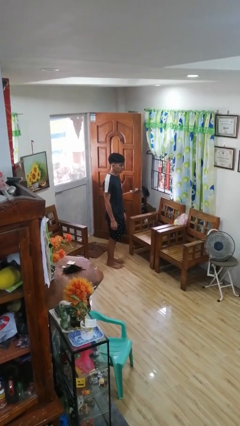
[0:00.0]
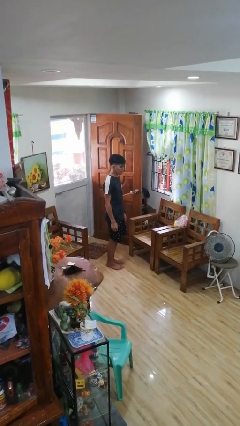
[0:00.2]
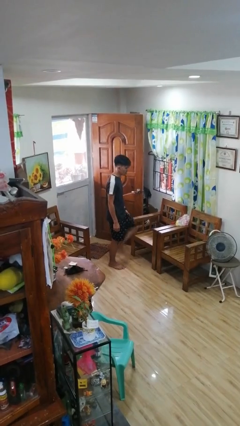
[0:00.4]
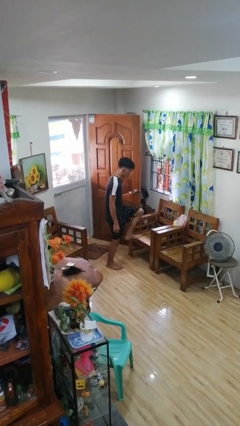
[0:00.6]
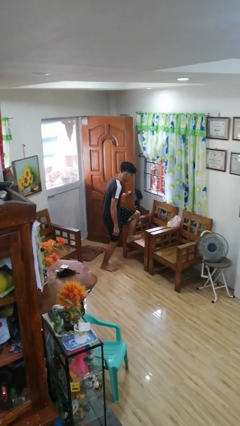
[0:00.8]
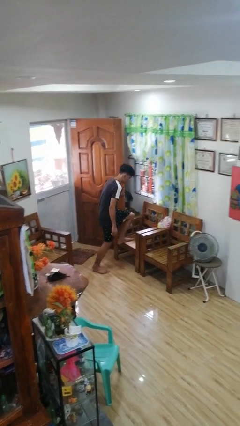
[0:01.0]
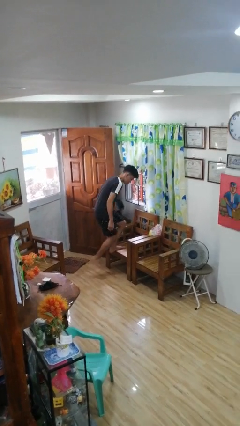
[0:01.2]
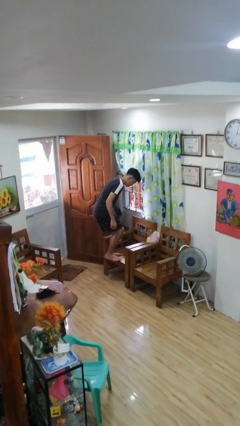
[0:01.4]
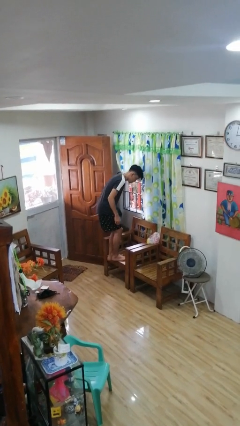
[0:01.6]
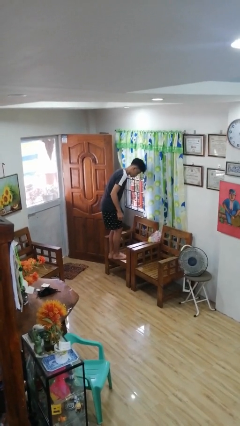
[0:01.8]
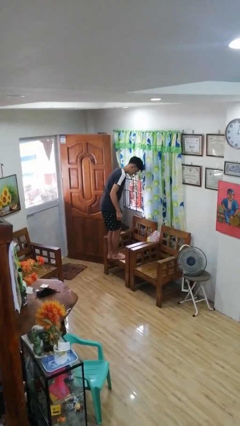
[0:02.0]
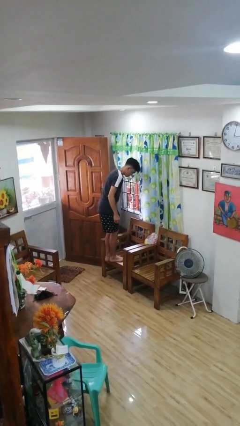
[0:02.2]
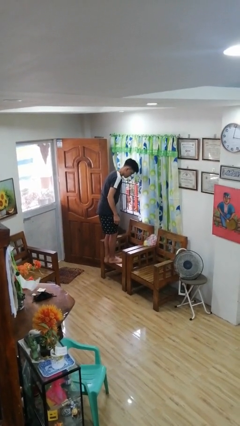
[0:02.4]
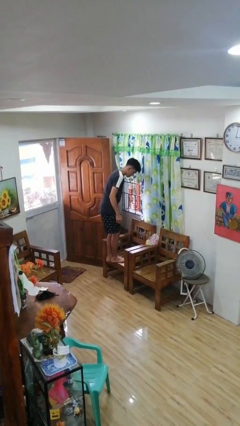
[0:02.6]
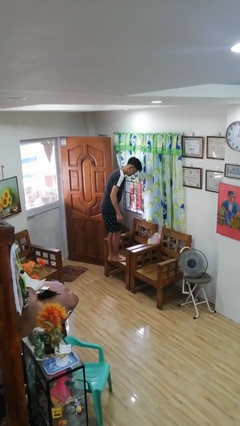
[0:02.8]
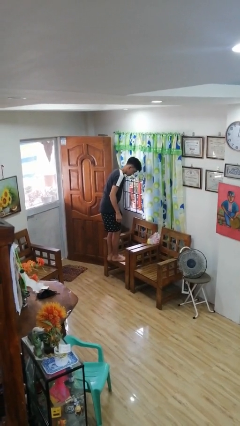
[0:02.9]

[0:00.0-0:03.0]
person climbs on chair

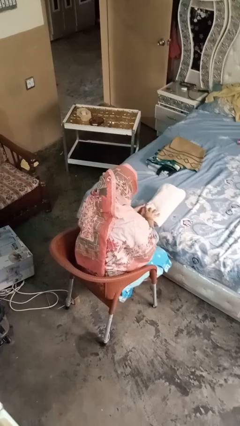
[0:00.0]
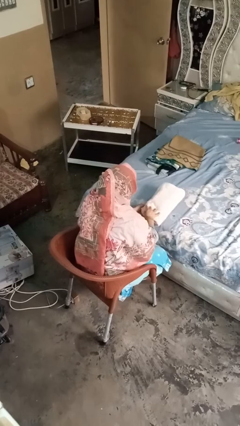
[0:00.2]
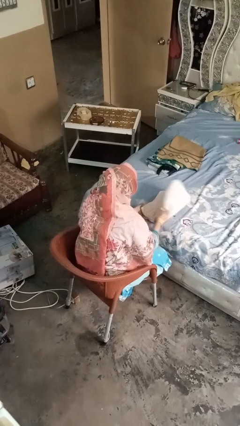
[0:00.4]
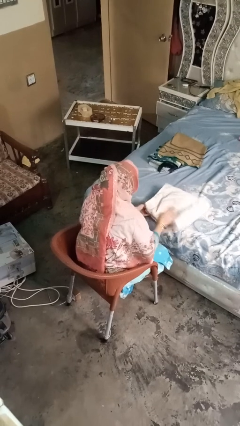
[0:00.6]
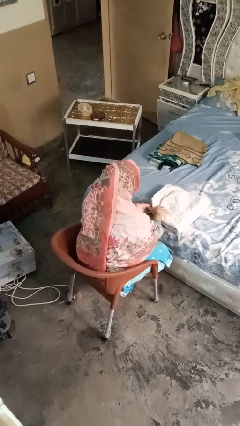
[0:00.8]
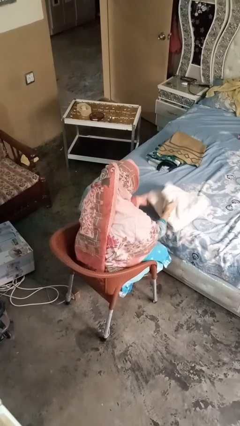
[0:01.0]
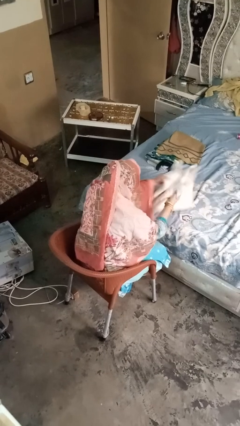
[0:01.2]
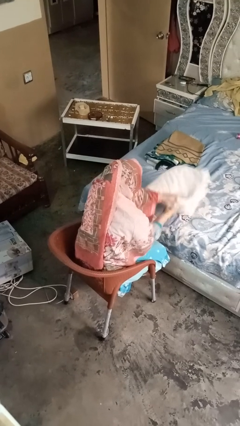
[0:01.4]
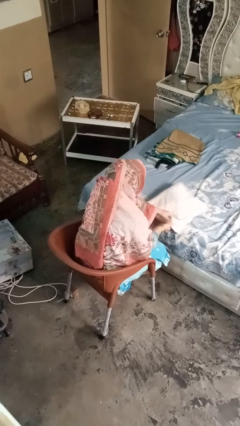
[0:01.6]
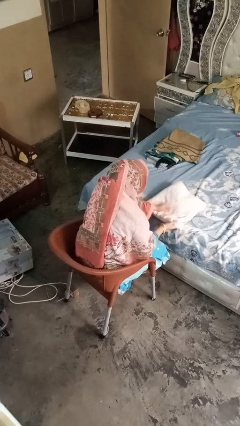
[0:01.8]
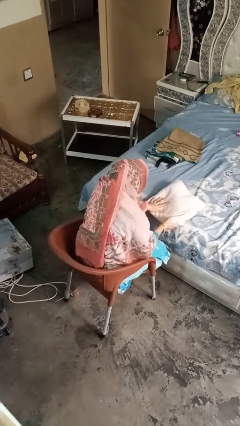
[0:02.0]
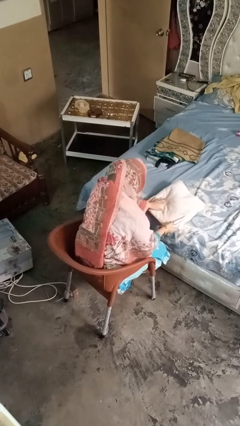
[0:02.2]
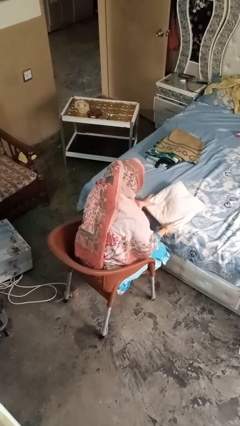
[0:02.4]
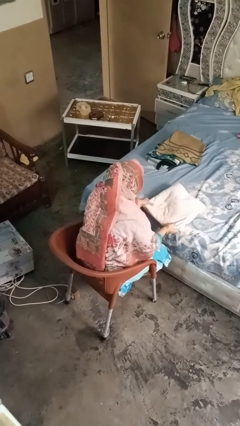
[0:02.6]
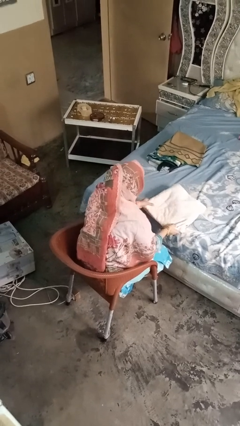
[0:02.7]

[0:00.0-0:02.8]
person folds towel

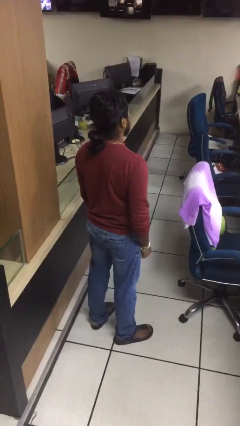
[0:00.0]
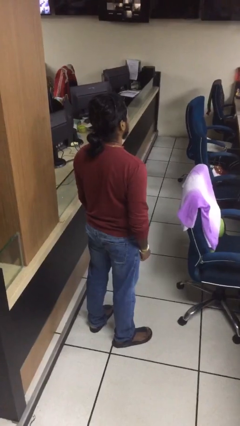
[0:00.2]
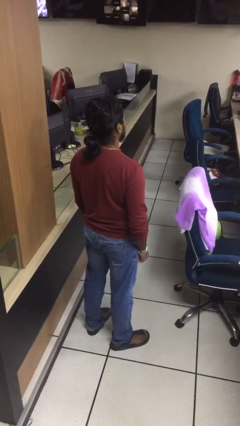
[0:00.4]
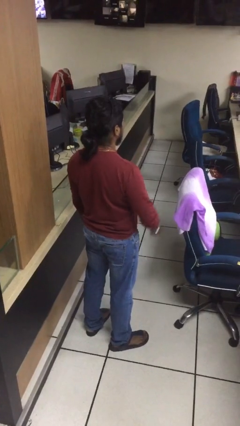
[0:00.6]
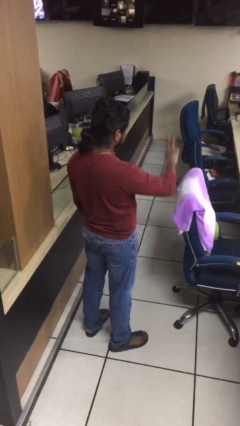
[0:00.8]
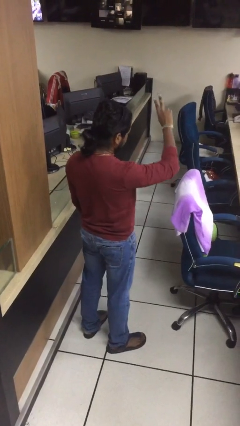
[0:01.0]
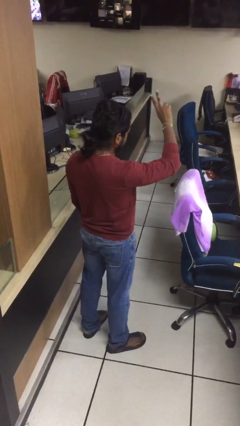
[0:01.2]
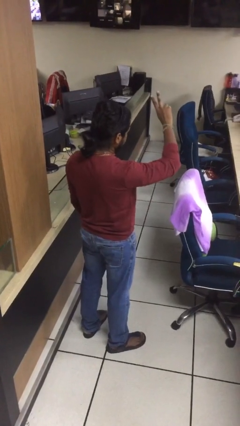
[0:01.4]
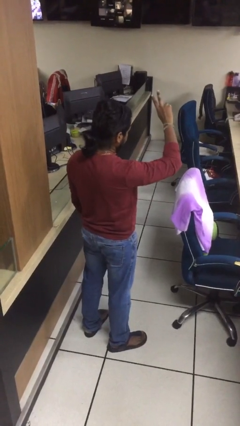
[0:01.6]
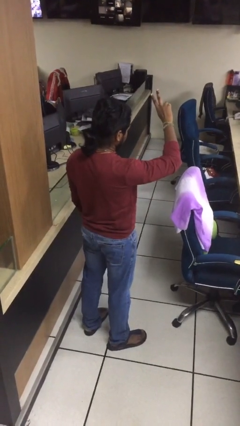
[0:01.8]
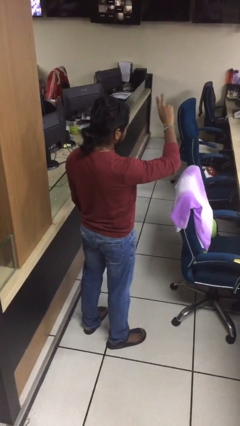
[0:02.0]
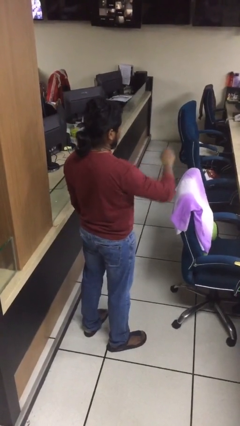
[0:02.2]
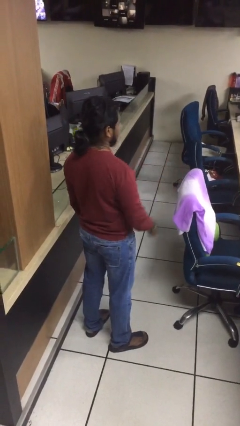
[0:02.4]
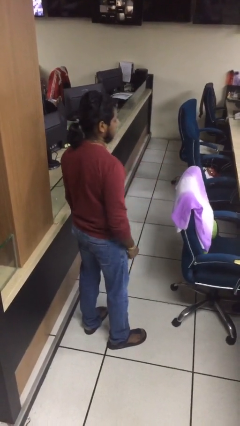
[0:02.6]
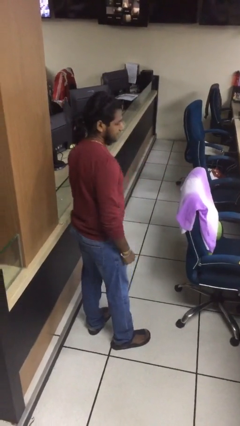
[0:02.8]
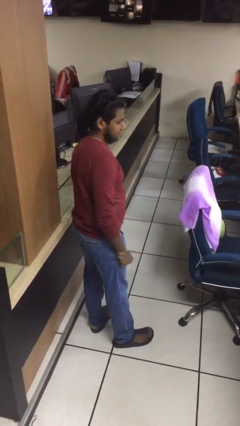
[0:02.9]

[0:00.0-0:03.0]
person gestures peace

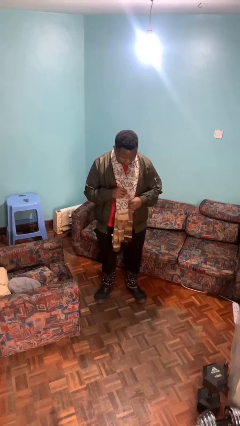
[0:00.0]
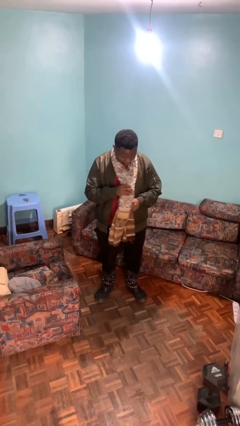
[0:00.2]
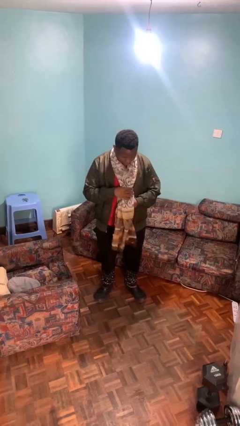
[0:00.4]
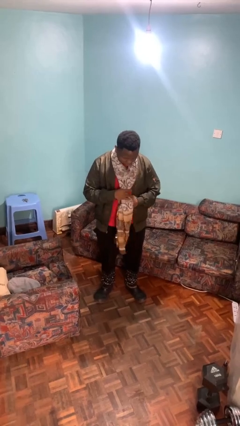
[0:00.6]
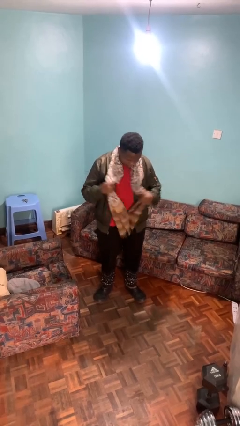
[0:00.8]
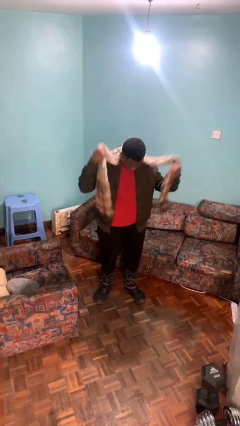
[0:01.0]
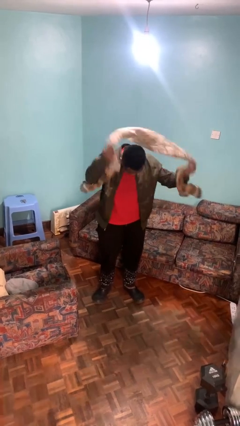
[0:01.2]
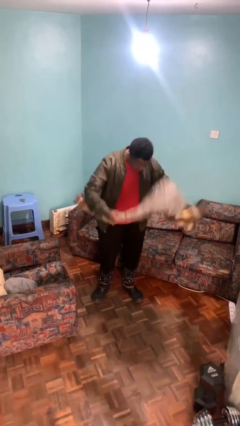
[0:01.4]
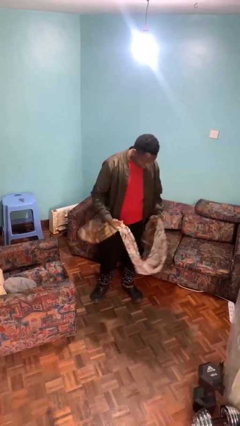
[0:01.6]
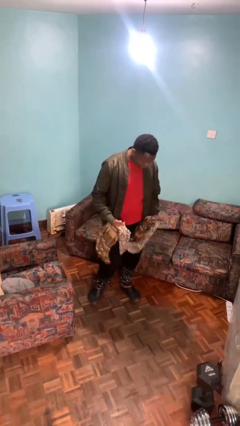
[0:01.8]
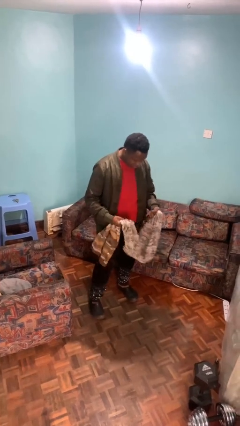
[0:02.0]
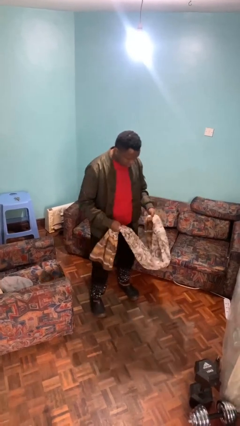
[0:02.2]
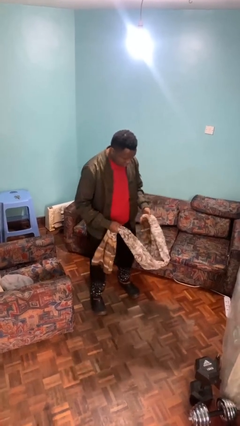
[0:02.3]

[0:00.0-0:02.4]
person takes off scarf

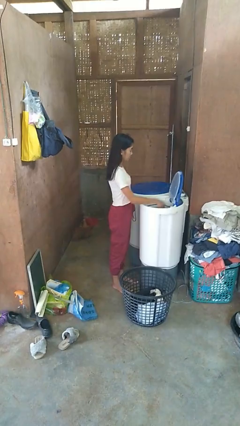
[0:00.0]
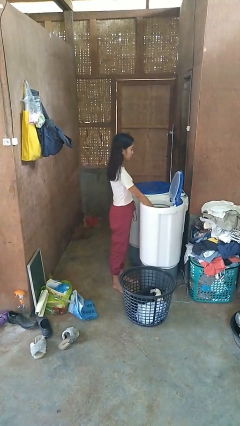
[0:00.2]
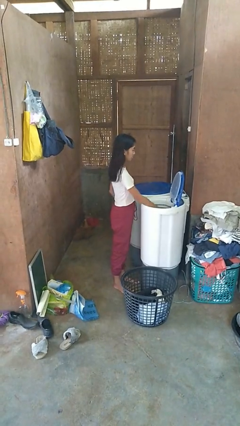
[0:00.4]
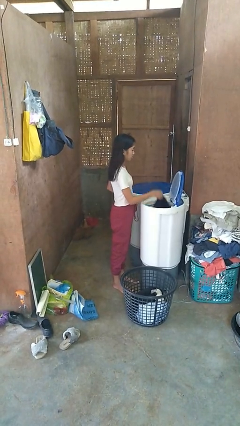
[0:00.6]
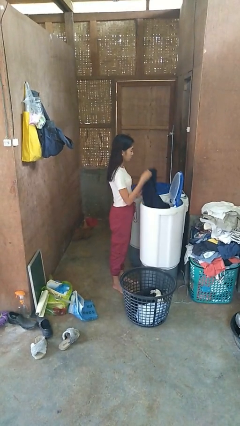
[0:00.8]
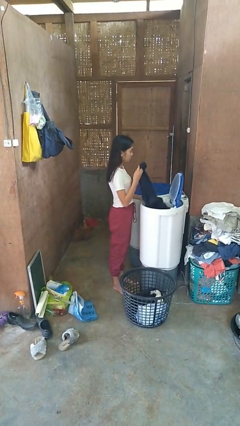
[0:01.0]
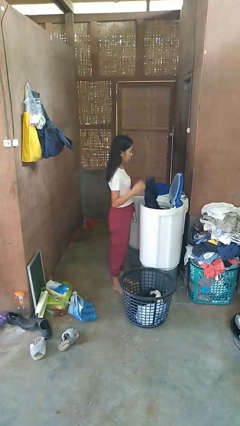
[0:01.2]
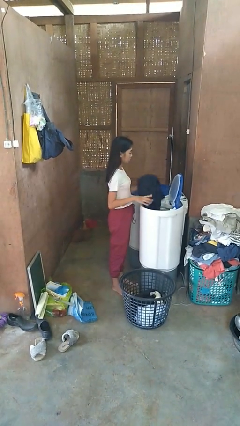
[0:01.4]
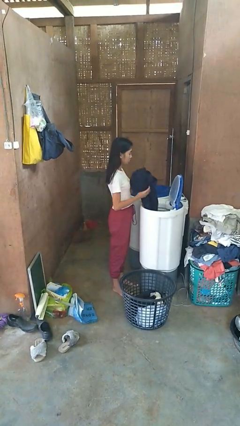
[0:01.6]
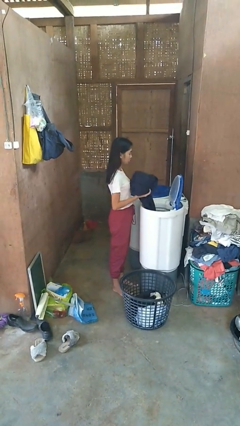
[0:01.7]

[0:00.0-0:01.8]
person unloads dryer

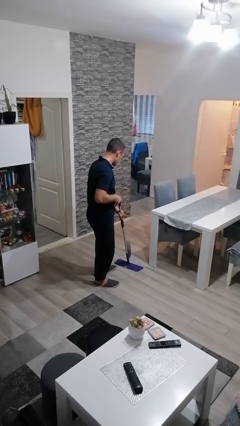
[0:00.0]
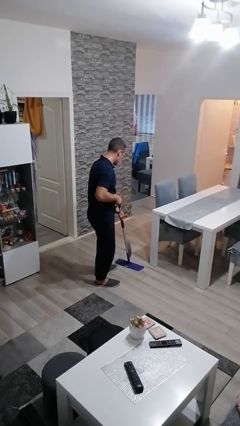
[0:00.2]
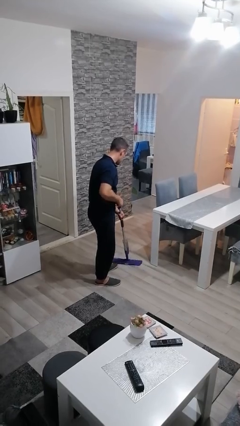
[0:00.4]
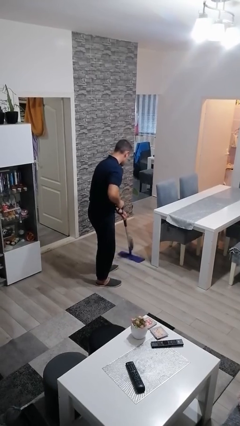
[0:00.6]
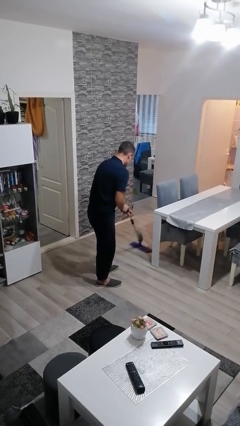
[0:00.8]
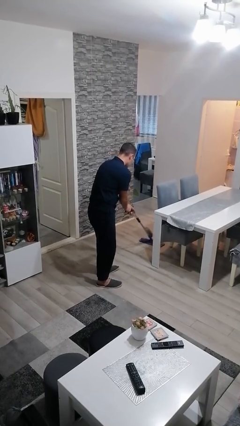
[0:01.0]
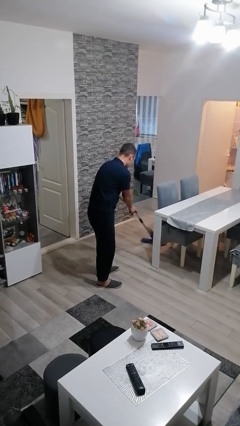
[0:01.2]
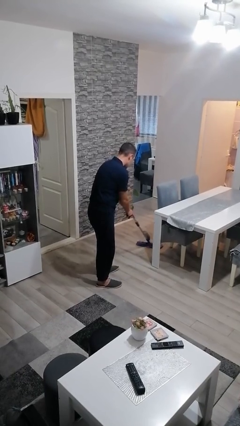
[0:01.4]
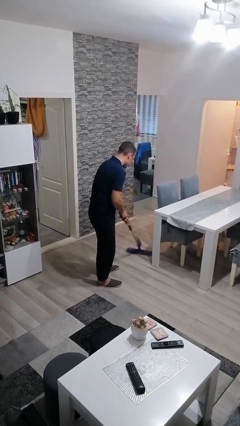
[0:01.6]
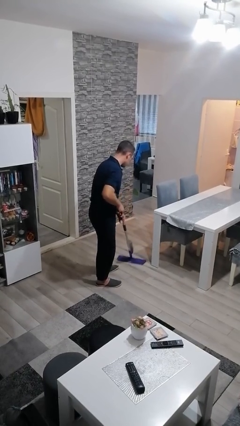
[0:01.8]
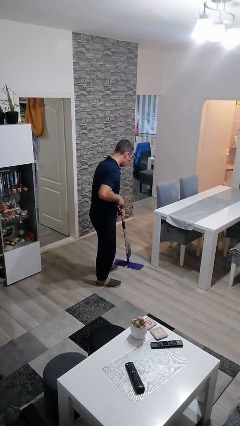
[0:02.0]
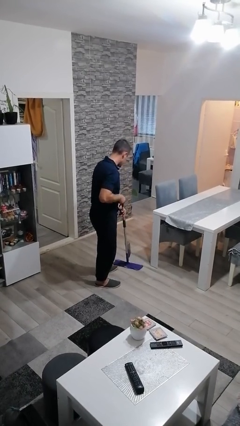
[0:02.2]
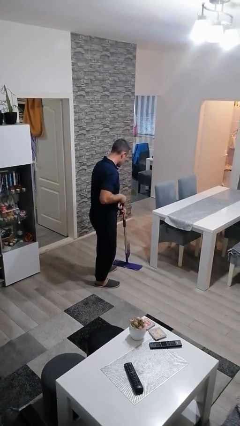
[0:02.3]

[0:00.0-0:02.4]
person mops

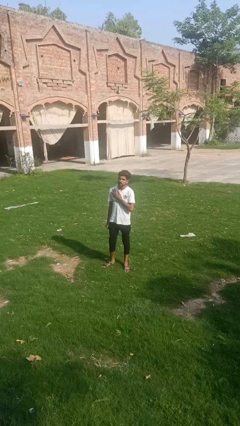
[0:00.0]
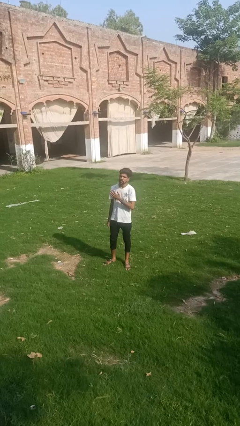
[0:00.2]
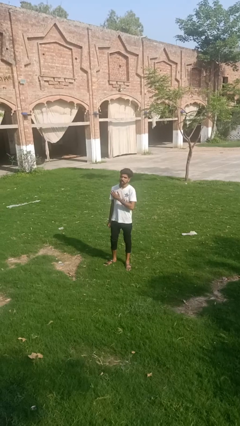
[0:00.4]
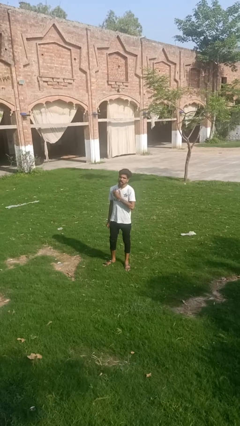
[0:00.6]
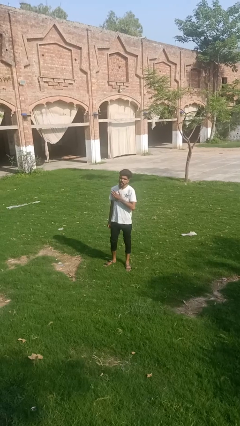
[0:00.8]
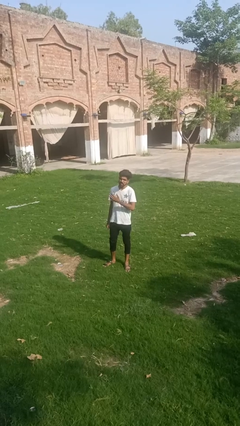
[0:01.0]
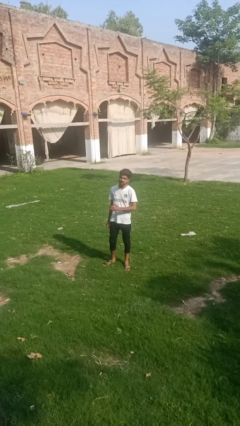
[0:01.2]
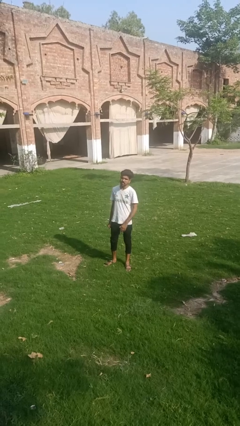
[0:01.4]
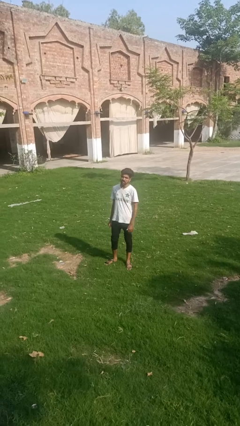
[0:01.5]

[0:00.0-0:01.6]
person drums on chest
